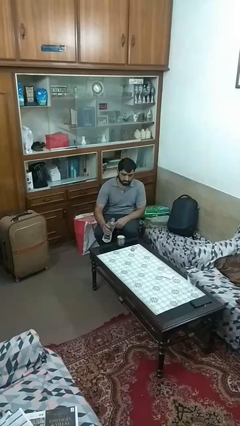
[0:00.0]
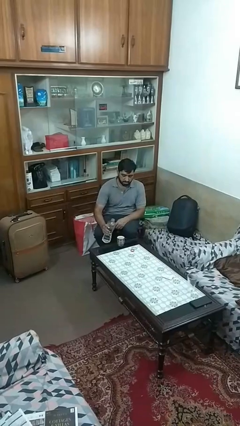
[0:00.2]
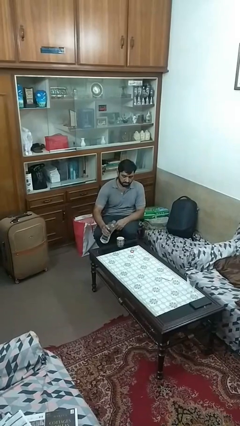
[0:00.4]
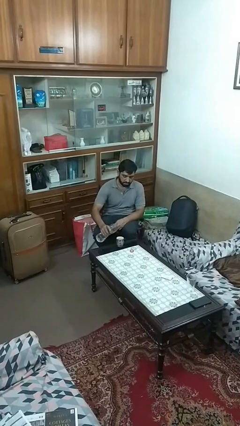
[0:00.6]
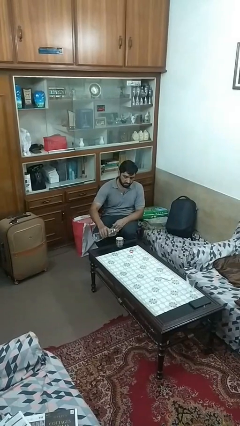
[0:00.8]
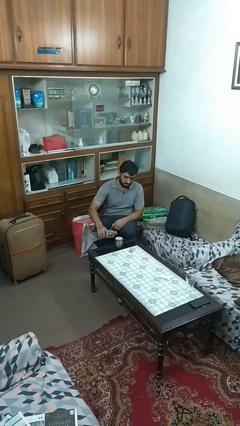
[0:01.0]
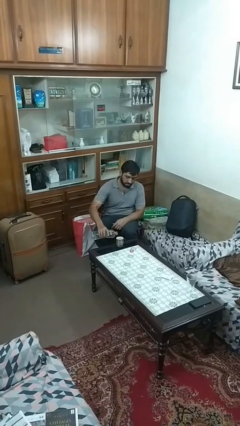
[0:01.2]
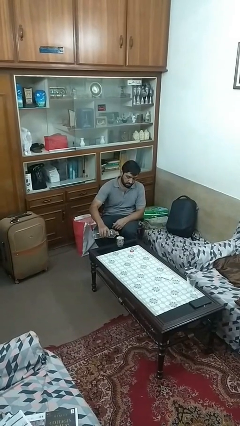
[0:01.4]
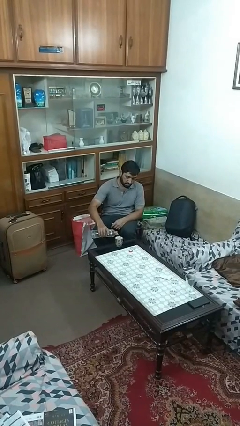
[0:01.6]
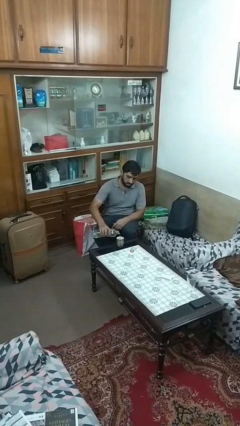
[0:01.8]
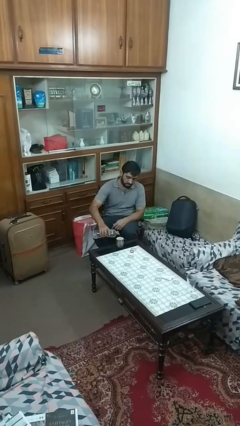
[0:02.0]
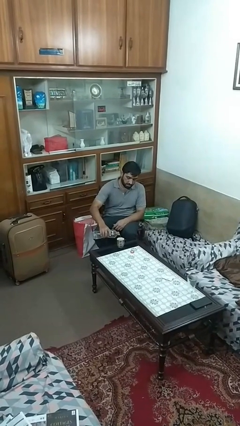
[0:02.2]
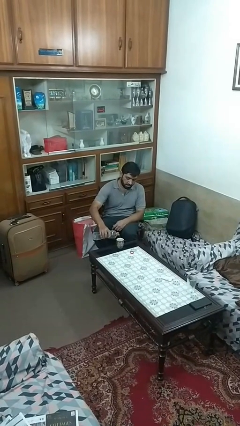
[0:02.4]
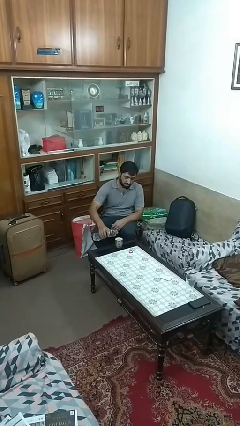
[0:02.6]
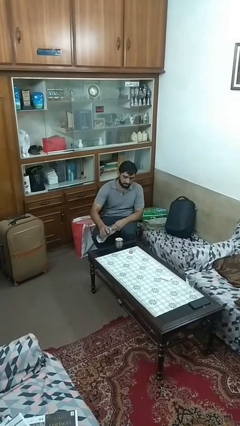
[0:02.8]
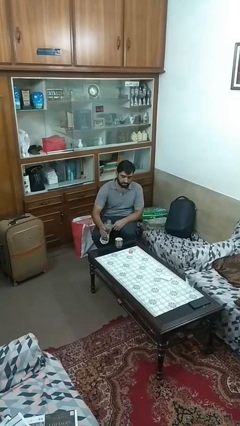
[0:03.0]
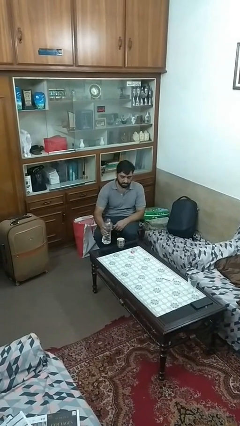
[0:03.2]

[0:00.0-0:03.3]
person pours liquid into cup

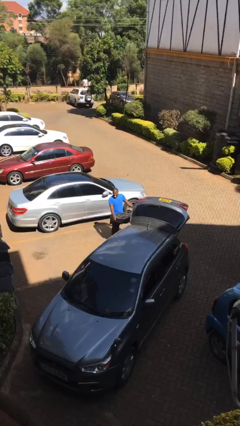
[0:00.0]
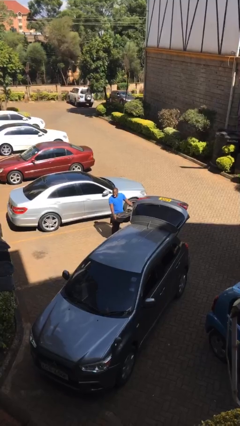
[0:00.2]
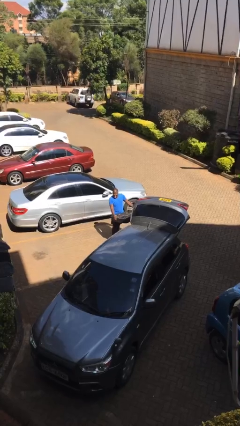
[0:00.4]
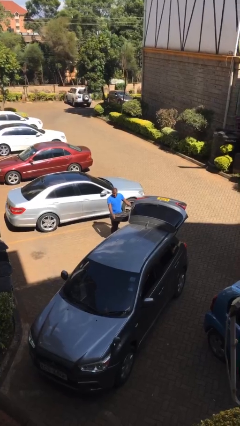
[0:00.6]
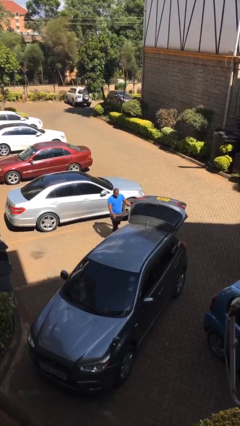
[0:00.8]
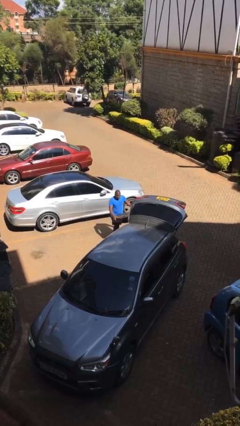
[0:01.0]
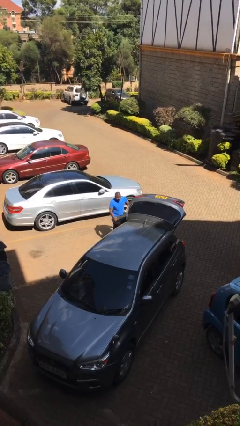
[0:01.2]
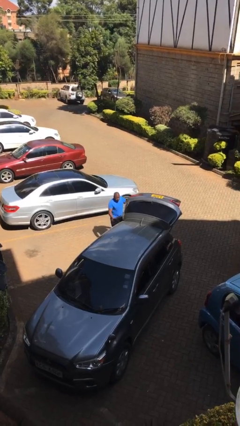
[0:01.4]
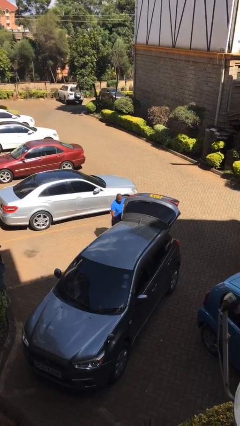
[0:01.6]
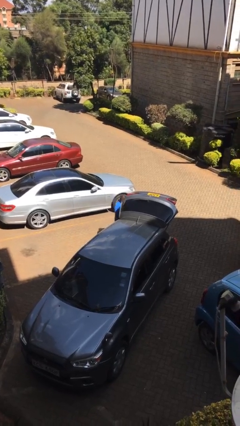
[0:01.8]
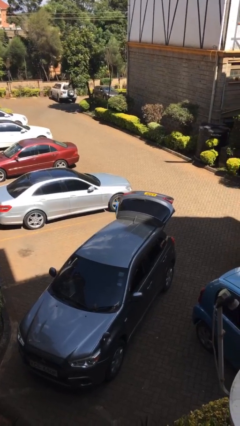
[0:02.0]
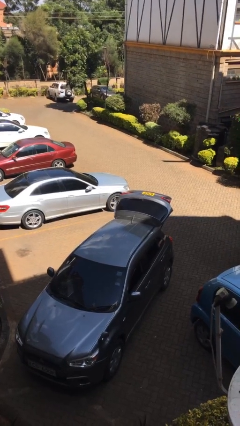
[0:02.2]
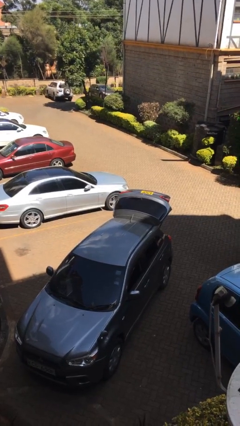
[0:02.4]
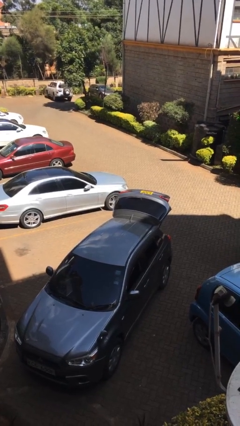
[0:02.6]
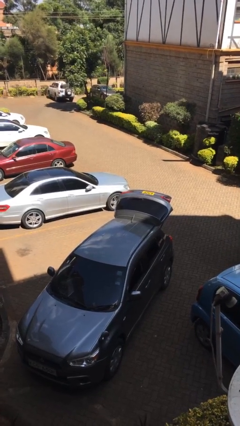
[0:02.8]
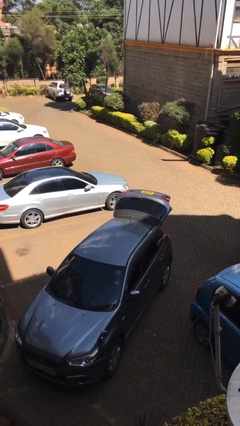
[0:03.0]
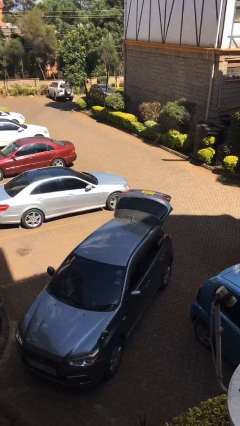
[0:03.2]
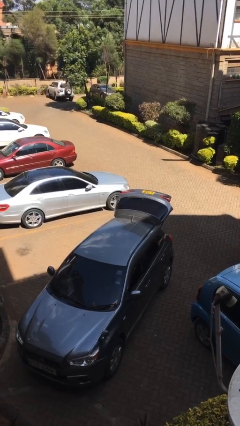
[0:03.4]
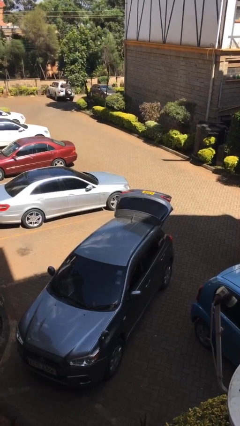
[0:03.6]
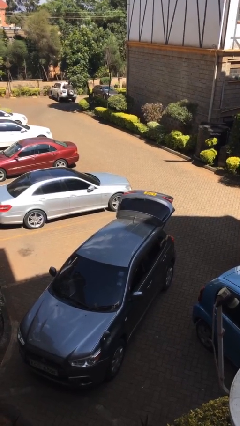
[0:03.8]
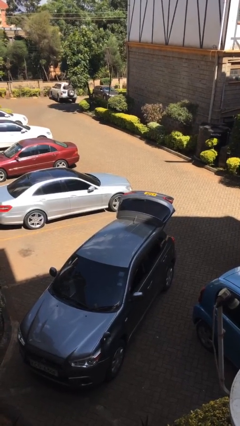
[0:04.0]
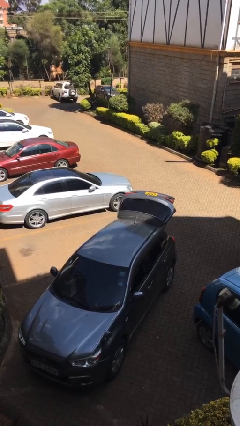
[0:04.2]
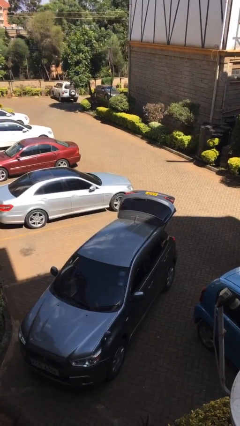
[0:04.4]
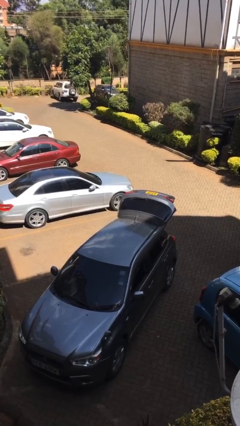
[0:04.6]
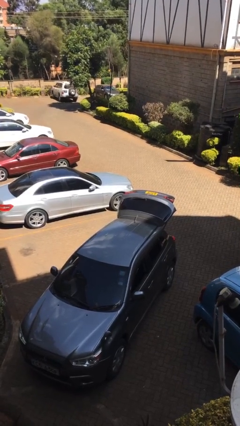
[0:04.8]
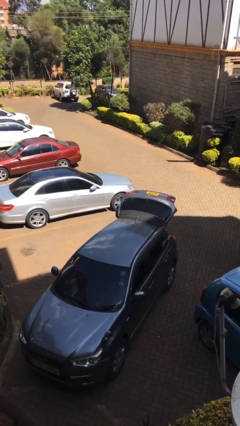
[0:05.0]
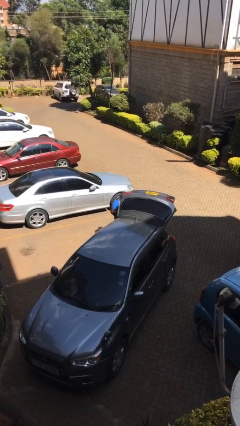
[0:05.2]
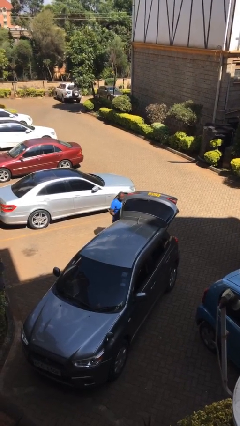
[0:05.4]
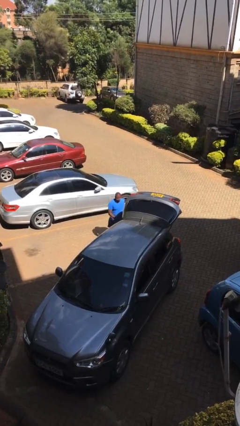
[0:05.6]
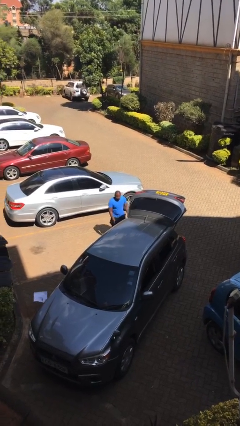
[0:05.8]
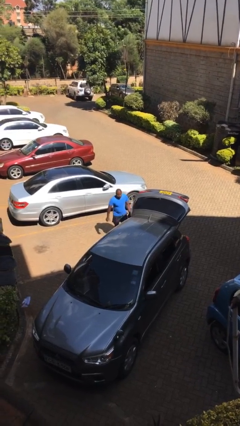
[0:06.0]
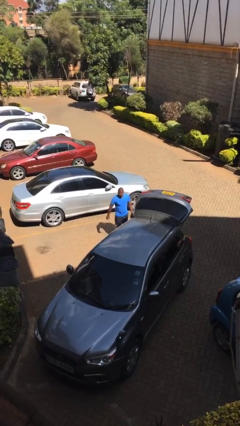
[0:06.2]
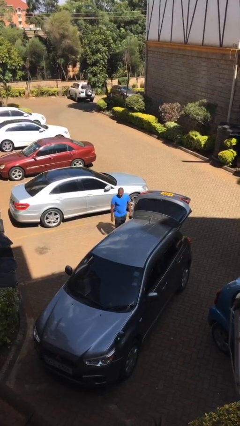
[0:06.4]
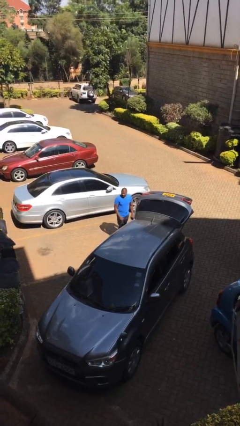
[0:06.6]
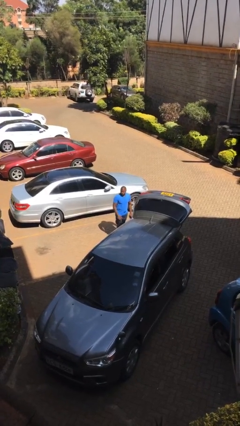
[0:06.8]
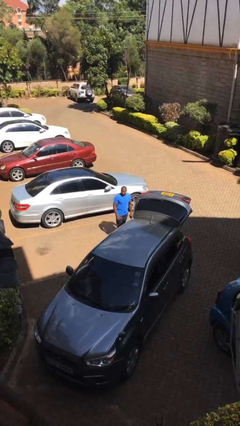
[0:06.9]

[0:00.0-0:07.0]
person loads car

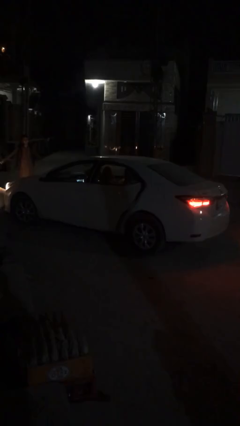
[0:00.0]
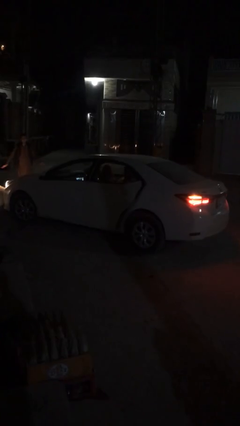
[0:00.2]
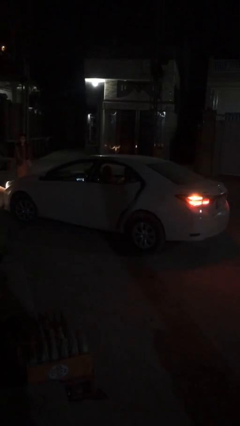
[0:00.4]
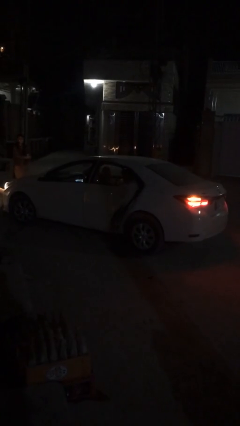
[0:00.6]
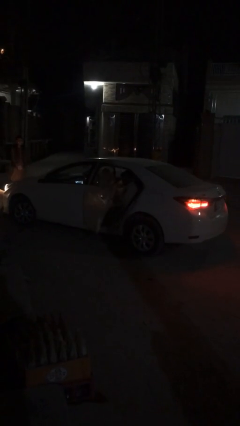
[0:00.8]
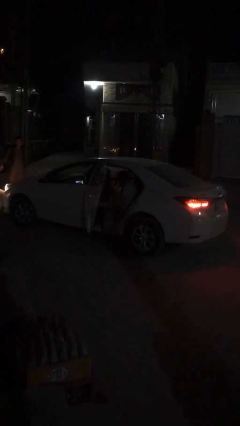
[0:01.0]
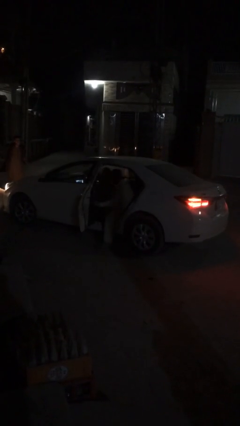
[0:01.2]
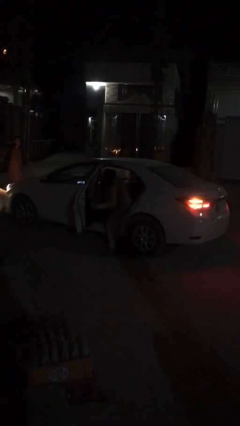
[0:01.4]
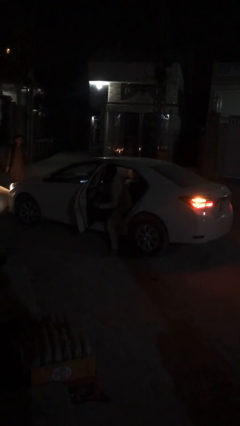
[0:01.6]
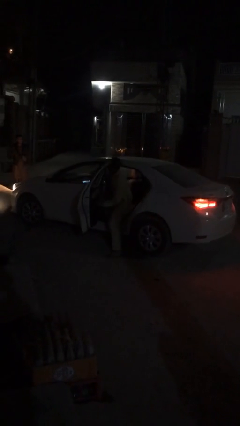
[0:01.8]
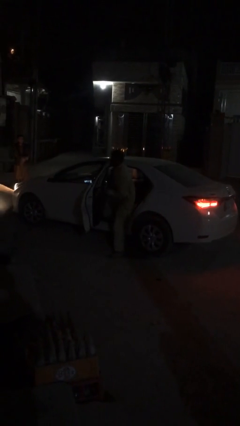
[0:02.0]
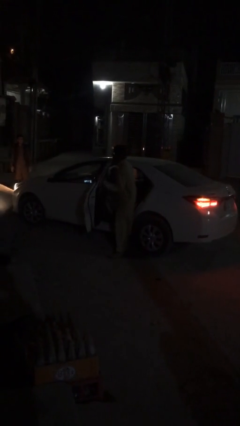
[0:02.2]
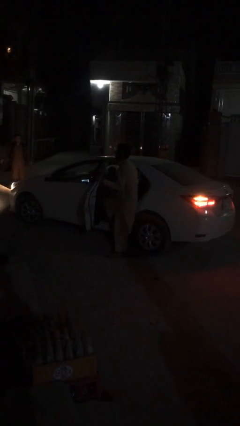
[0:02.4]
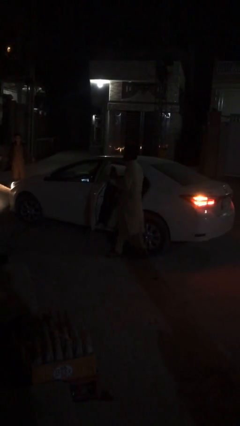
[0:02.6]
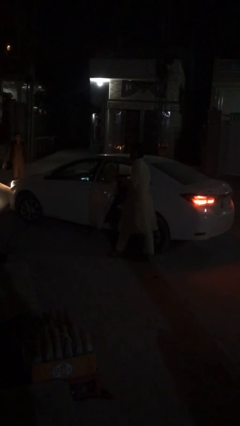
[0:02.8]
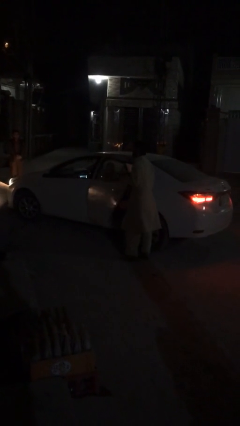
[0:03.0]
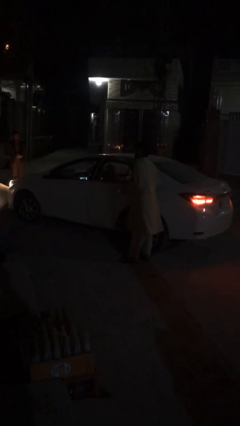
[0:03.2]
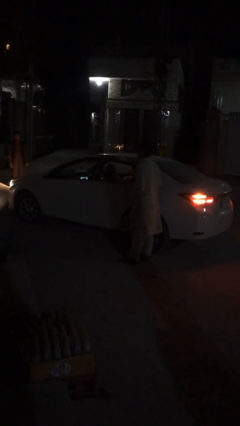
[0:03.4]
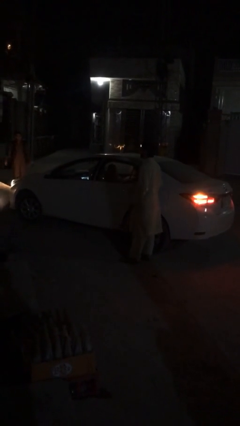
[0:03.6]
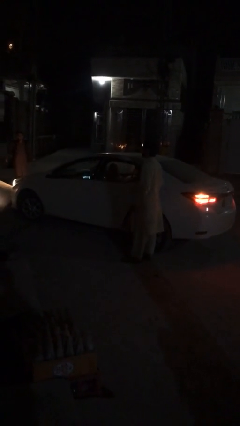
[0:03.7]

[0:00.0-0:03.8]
car drops off person

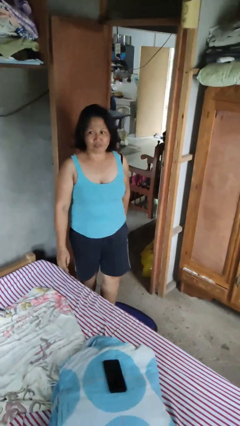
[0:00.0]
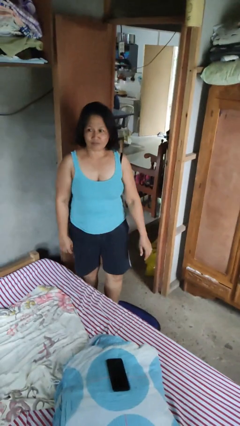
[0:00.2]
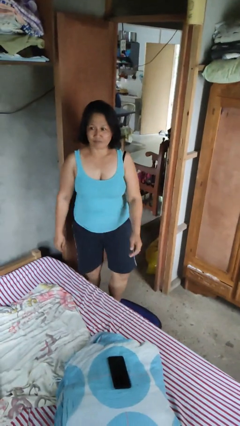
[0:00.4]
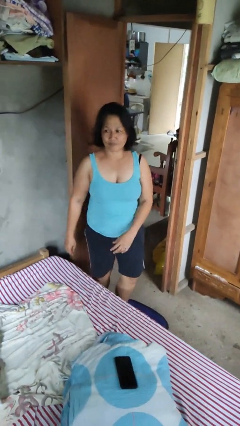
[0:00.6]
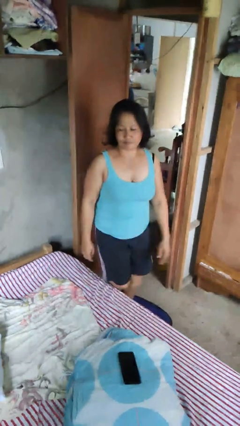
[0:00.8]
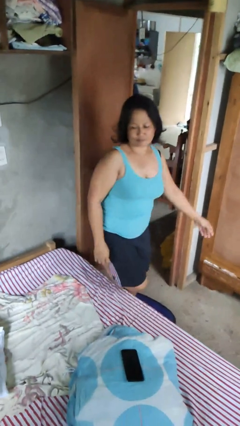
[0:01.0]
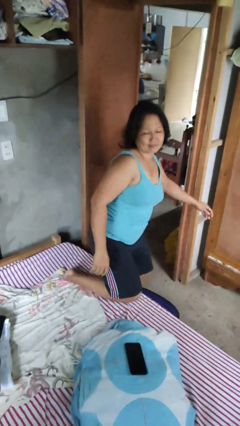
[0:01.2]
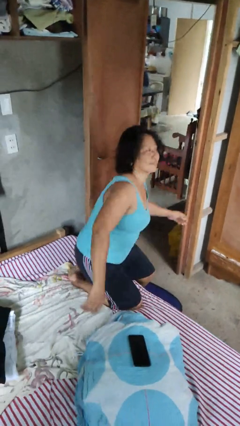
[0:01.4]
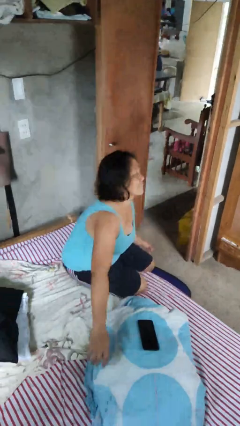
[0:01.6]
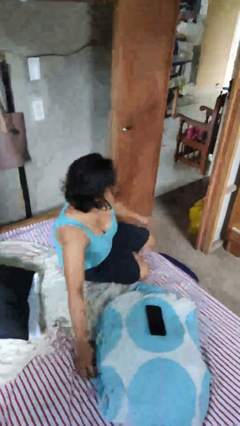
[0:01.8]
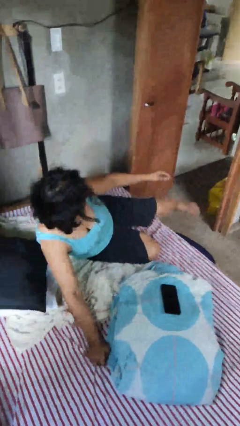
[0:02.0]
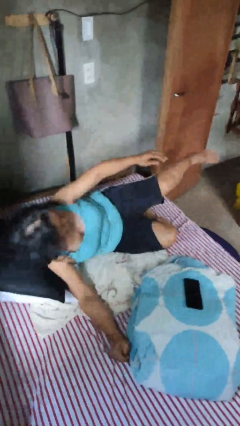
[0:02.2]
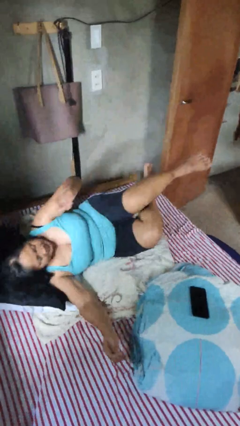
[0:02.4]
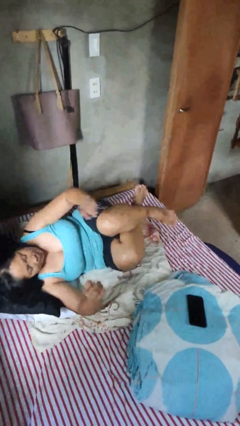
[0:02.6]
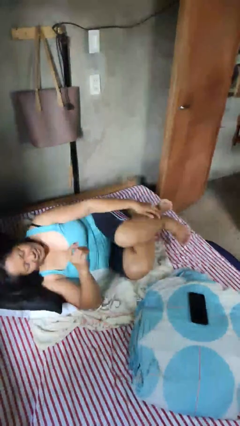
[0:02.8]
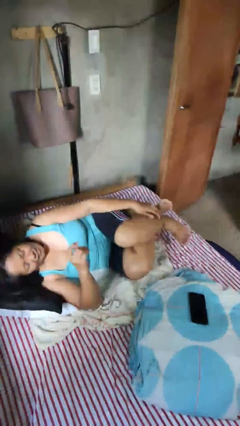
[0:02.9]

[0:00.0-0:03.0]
person lies down on bed

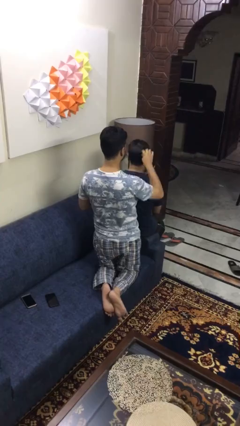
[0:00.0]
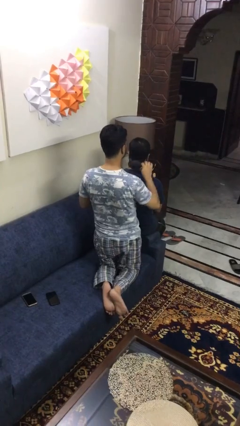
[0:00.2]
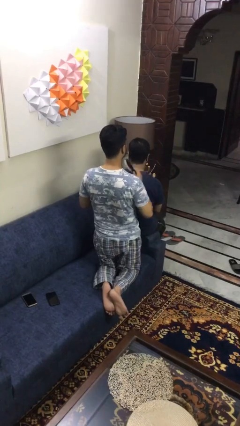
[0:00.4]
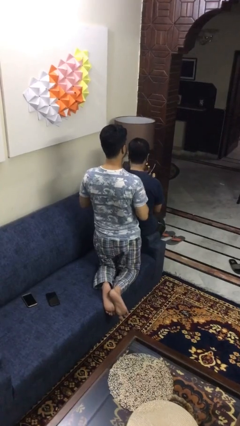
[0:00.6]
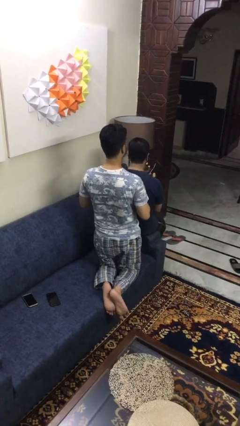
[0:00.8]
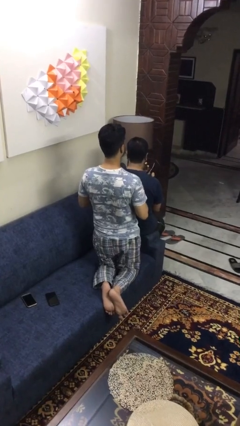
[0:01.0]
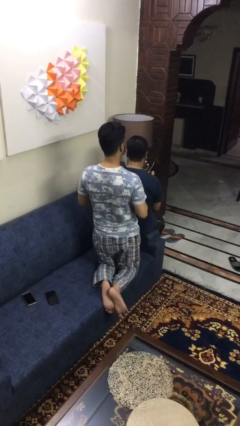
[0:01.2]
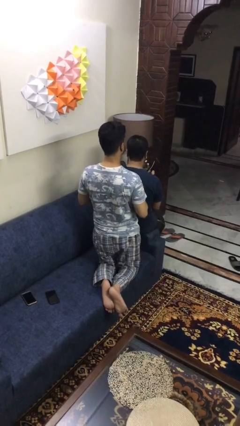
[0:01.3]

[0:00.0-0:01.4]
person brushes hair of person
